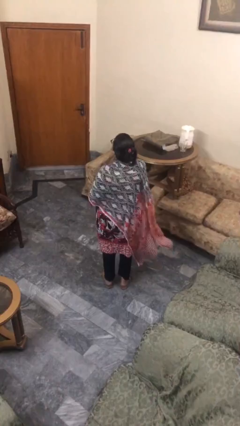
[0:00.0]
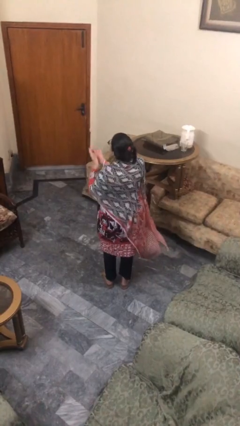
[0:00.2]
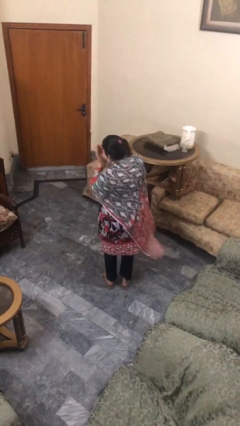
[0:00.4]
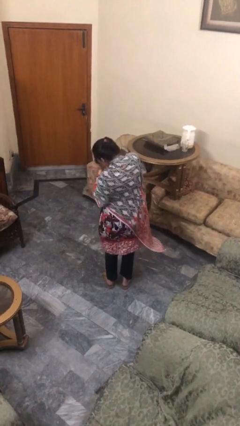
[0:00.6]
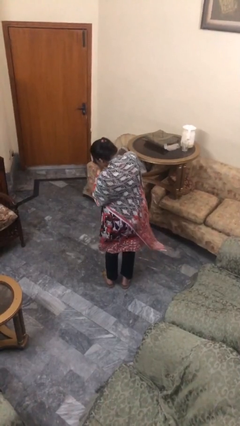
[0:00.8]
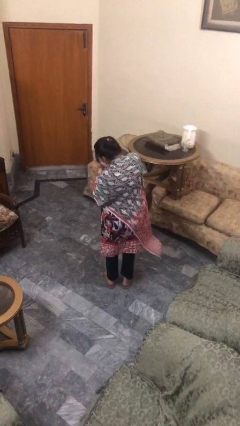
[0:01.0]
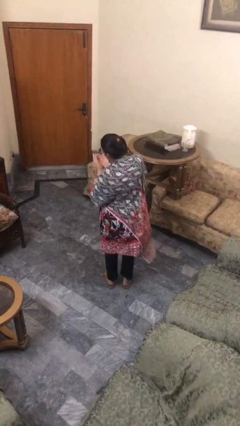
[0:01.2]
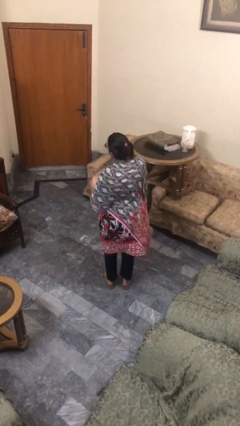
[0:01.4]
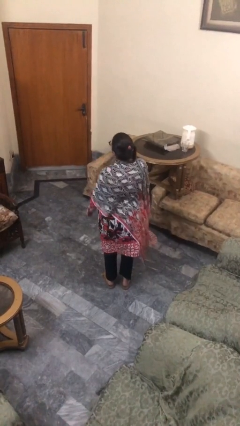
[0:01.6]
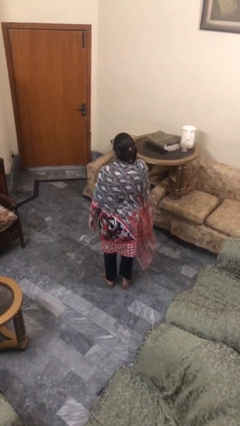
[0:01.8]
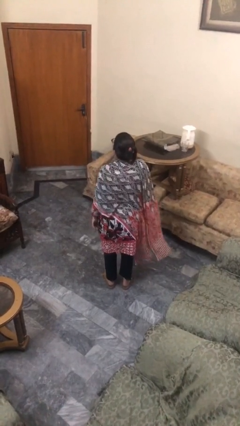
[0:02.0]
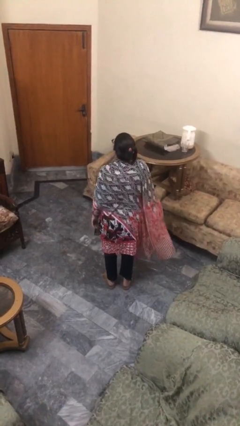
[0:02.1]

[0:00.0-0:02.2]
person sneezes into hand

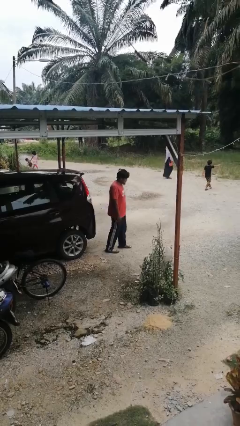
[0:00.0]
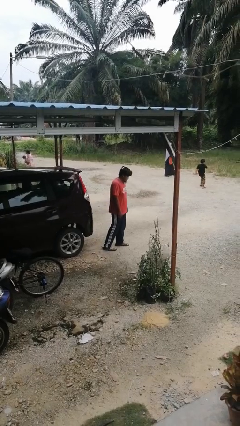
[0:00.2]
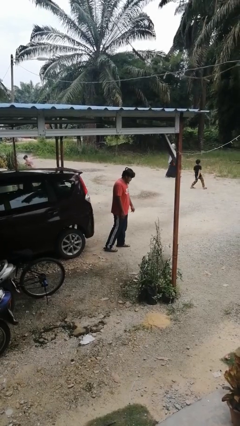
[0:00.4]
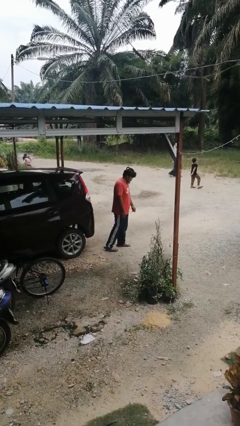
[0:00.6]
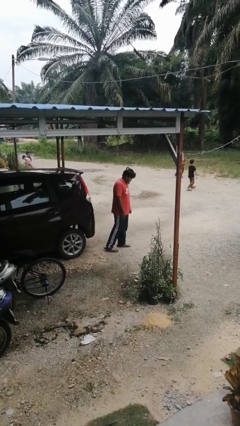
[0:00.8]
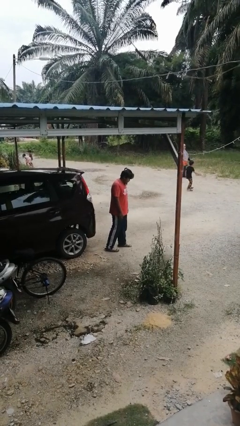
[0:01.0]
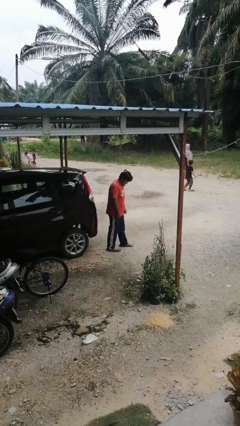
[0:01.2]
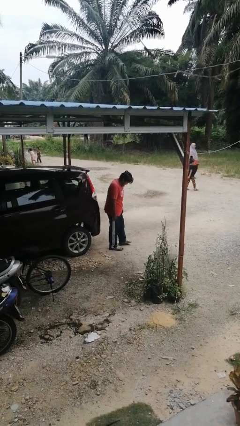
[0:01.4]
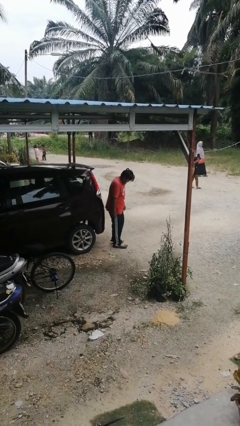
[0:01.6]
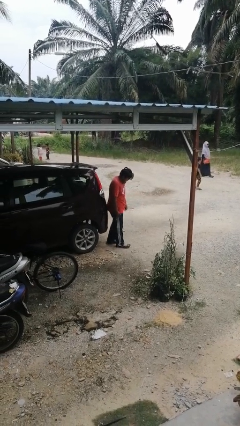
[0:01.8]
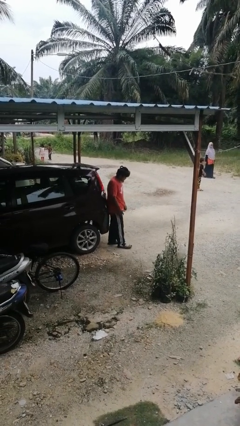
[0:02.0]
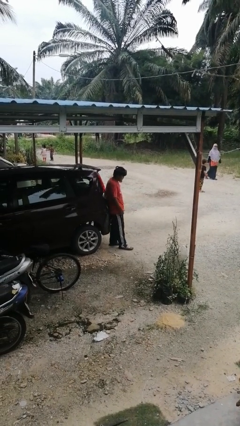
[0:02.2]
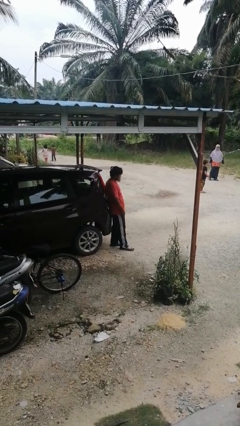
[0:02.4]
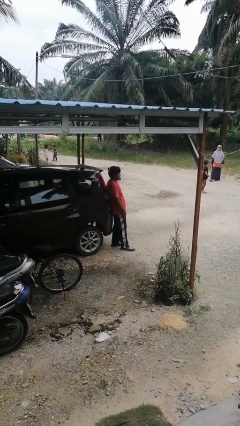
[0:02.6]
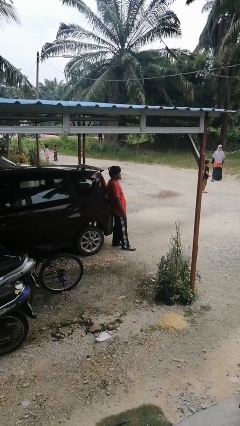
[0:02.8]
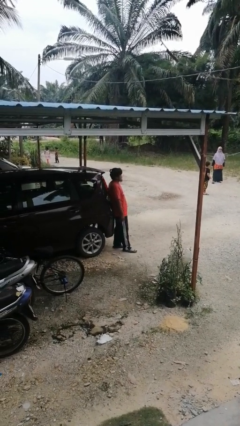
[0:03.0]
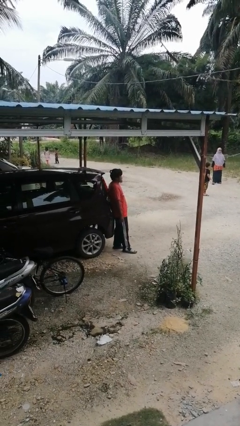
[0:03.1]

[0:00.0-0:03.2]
person leans against car

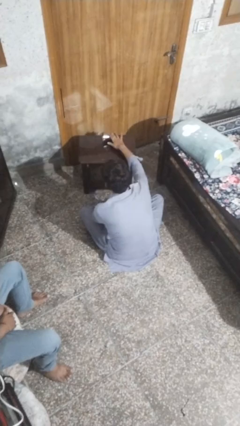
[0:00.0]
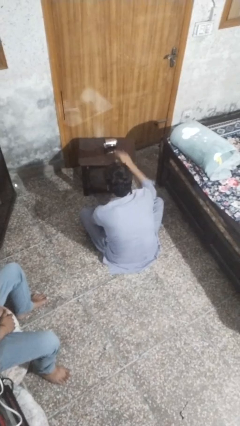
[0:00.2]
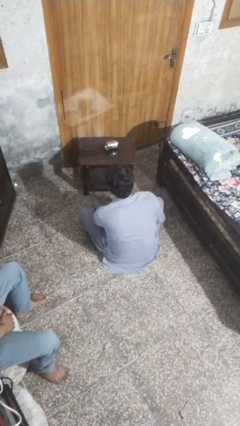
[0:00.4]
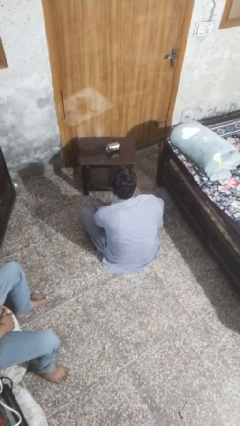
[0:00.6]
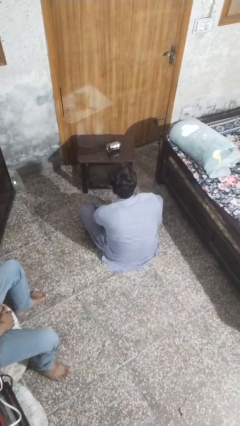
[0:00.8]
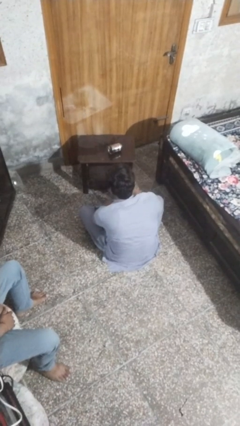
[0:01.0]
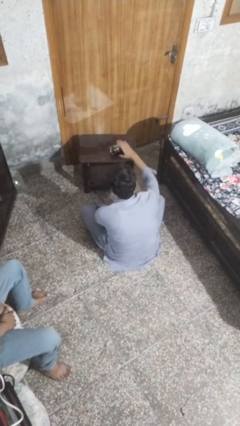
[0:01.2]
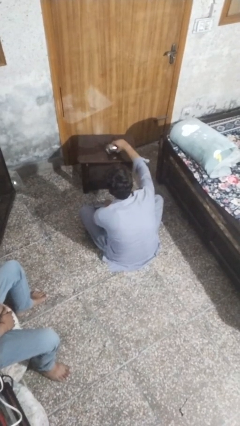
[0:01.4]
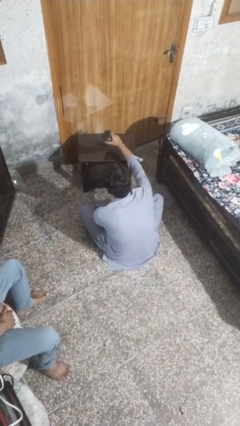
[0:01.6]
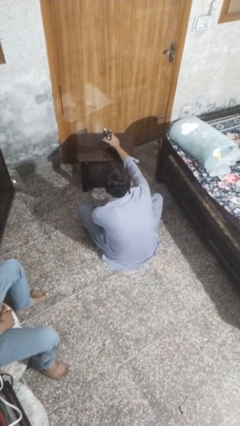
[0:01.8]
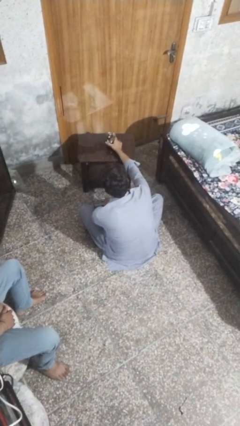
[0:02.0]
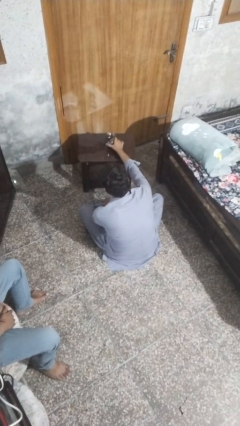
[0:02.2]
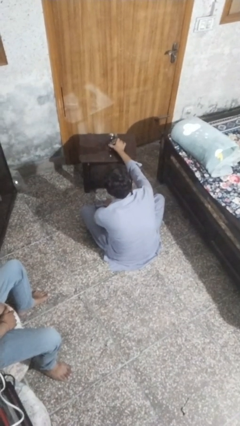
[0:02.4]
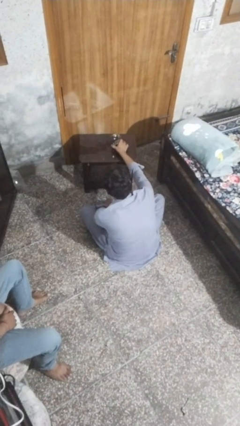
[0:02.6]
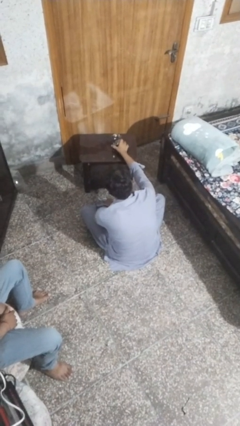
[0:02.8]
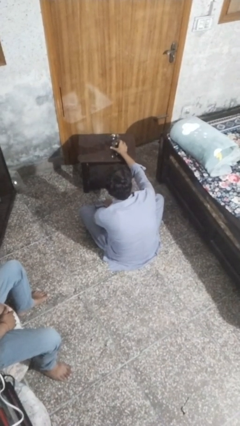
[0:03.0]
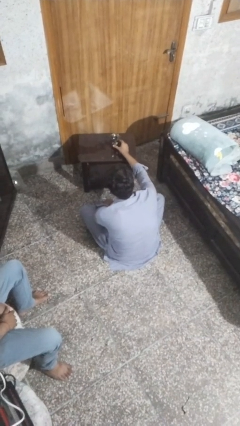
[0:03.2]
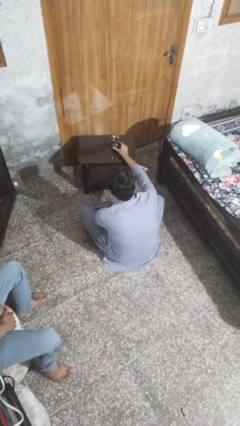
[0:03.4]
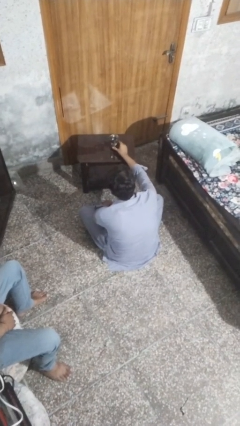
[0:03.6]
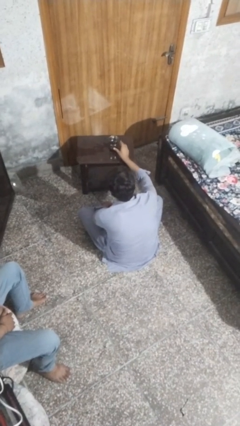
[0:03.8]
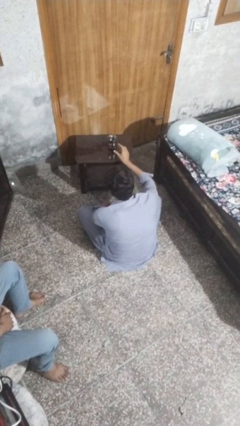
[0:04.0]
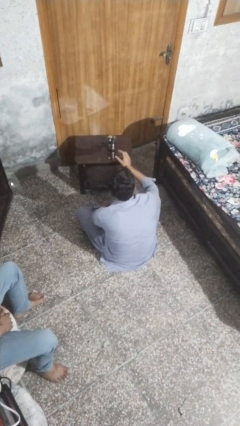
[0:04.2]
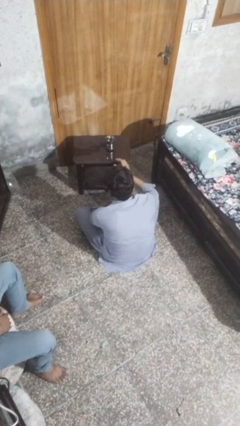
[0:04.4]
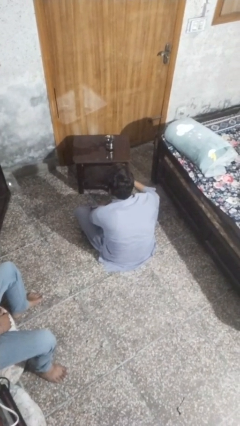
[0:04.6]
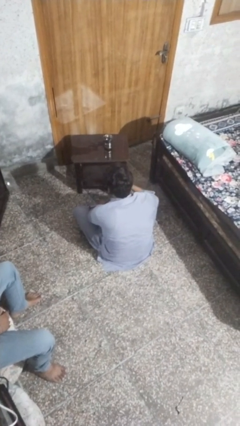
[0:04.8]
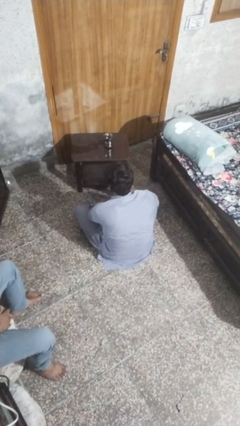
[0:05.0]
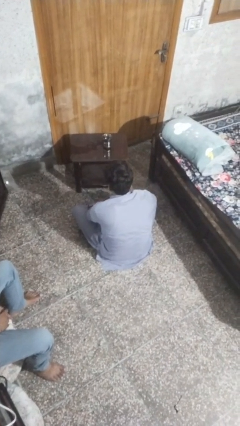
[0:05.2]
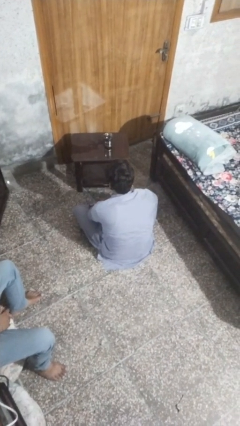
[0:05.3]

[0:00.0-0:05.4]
person sets upright glass

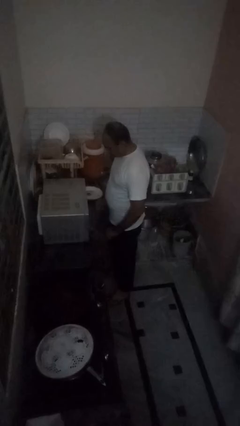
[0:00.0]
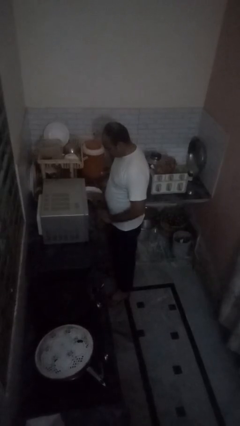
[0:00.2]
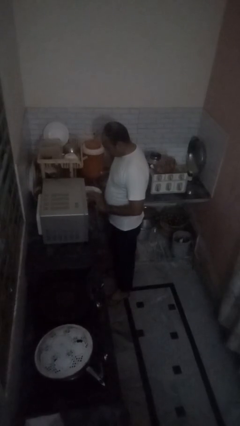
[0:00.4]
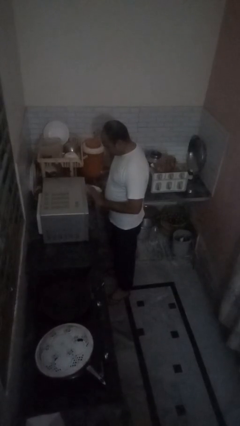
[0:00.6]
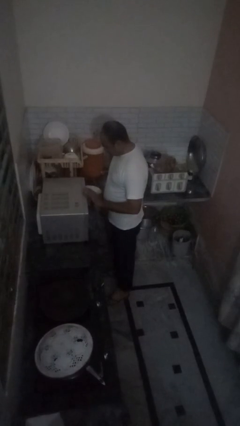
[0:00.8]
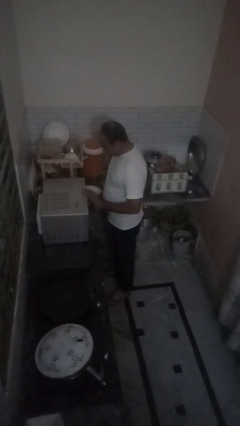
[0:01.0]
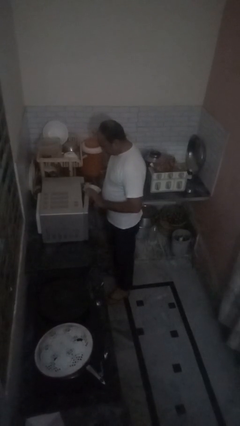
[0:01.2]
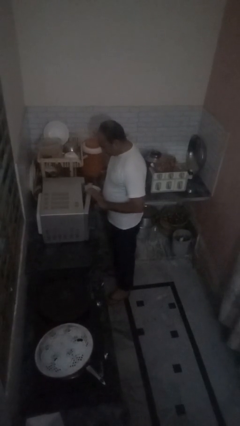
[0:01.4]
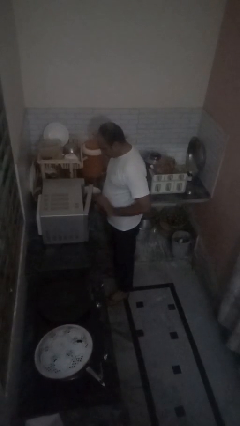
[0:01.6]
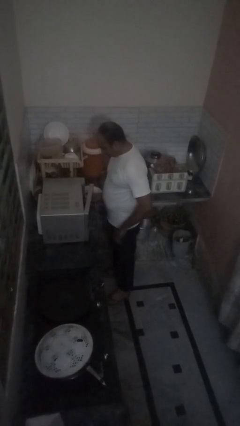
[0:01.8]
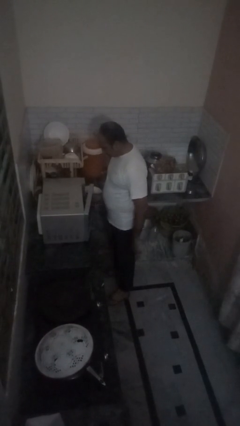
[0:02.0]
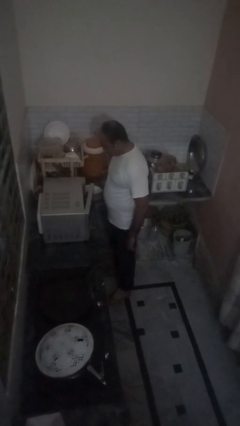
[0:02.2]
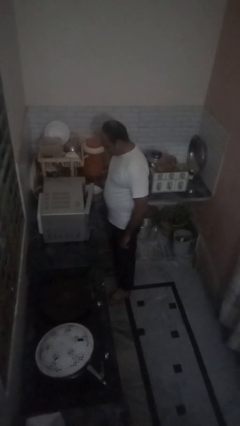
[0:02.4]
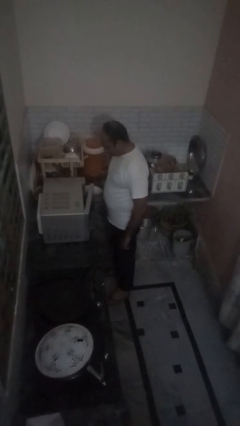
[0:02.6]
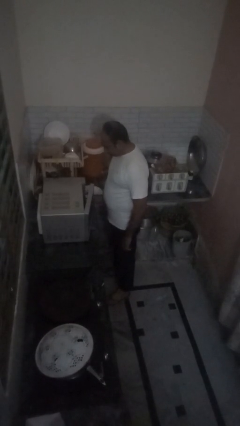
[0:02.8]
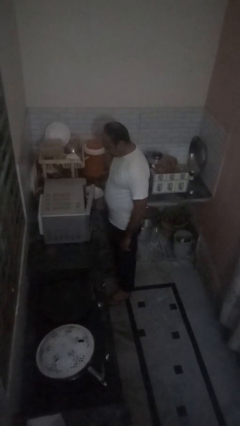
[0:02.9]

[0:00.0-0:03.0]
person opens oven door

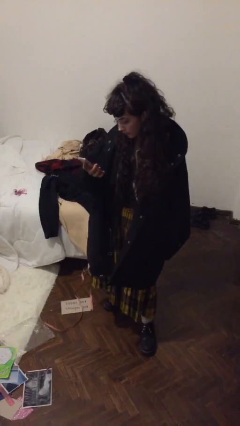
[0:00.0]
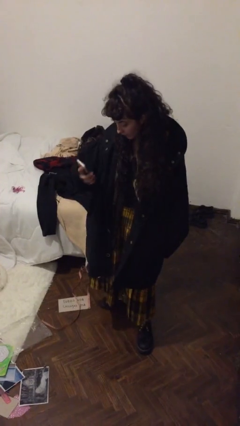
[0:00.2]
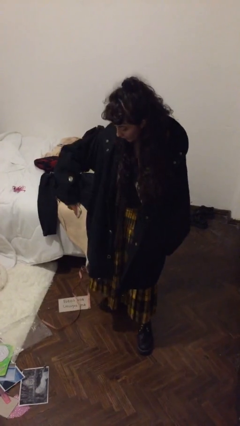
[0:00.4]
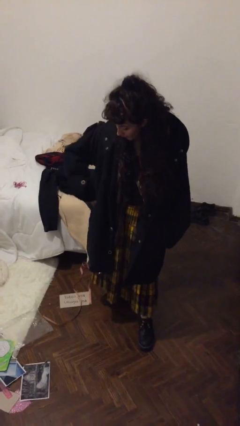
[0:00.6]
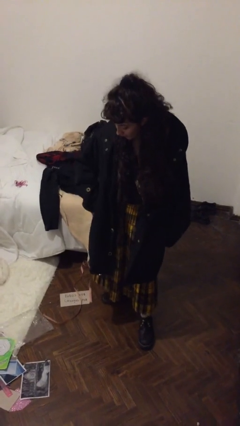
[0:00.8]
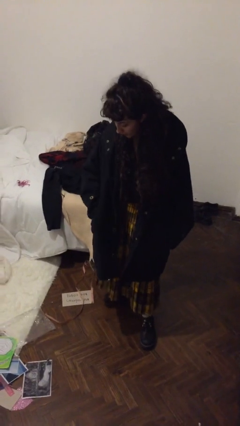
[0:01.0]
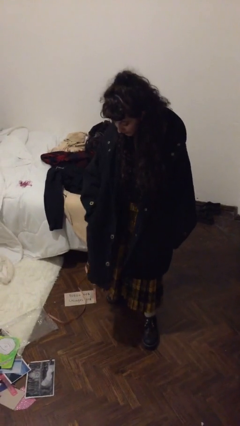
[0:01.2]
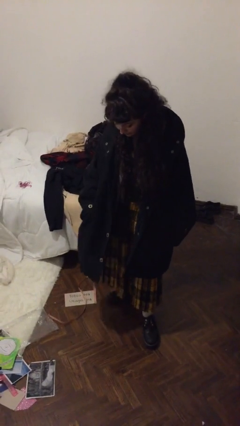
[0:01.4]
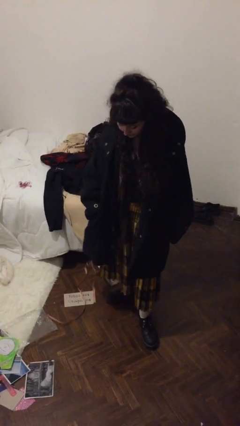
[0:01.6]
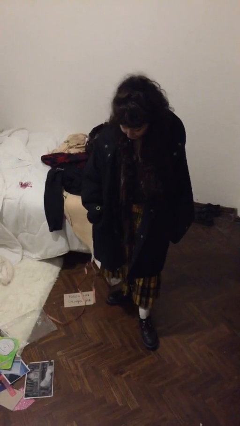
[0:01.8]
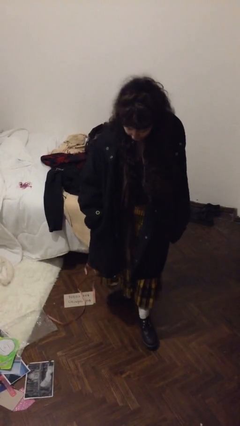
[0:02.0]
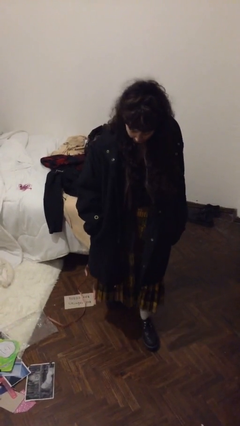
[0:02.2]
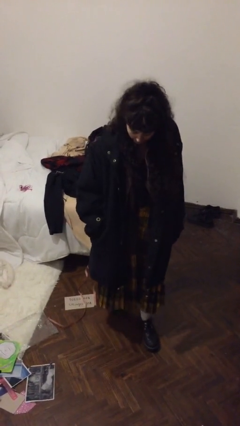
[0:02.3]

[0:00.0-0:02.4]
person puts phone into pocket

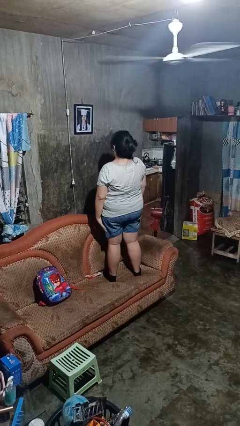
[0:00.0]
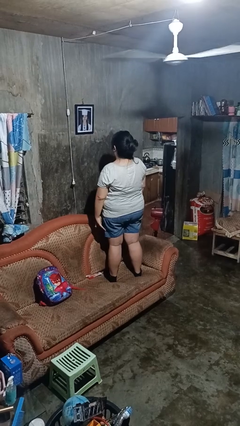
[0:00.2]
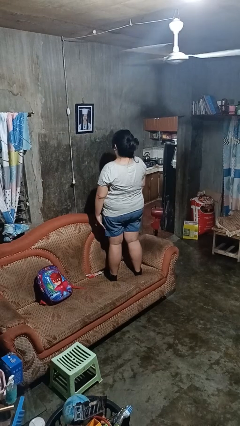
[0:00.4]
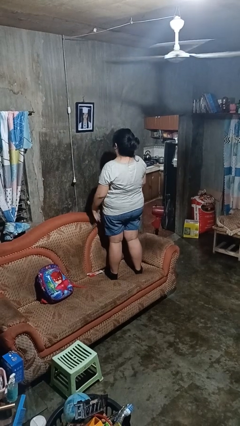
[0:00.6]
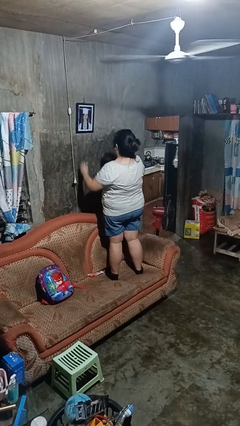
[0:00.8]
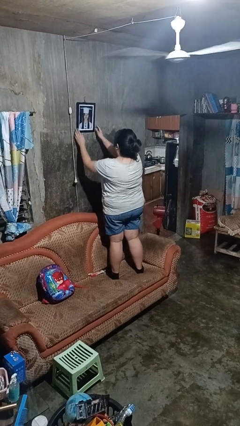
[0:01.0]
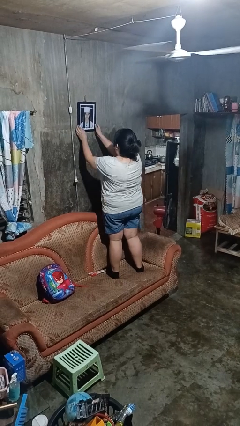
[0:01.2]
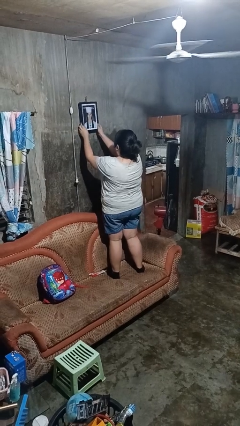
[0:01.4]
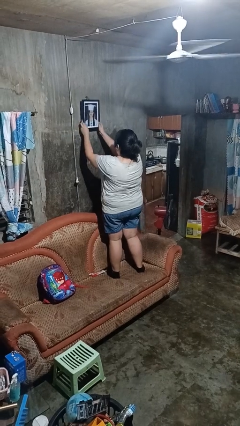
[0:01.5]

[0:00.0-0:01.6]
person takes down picture frame
